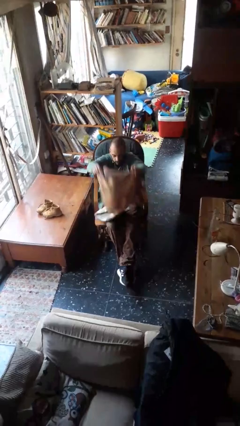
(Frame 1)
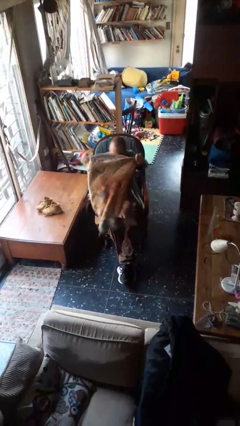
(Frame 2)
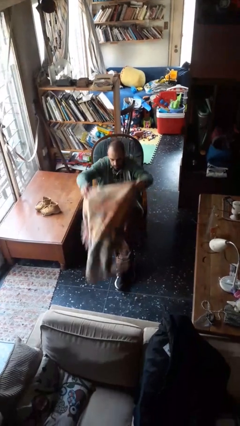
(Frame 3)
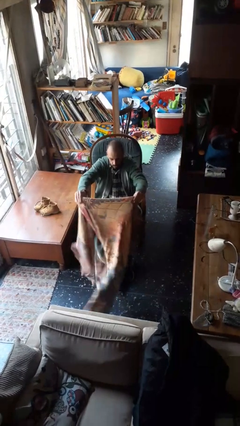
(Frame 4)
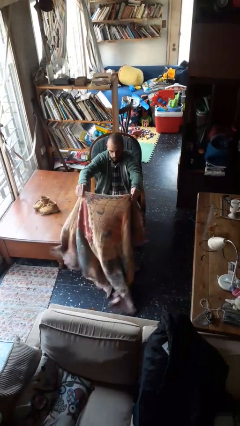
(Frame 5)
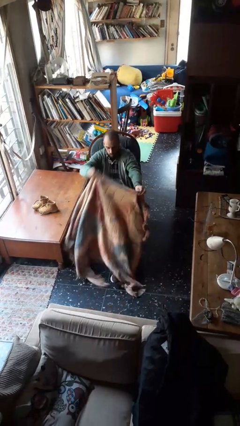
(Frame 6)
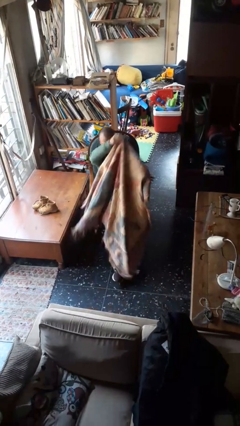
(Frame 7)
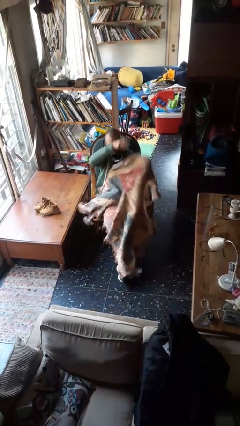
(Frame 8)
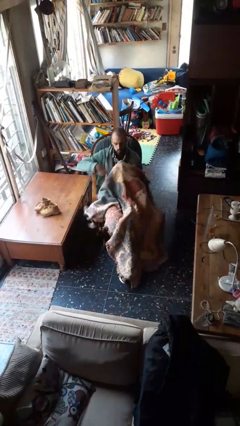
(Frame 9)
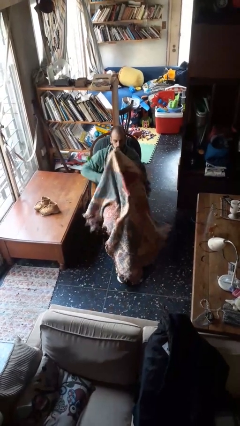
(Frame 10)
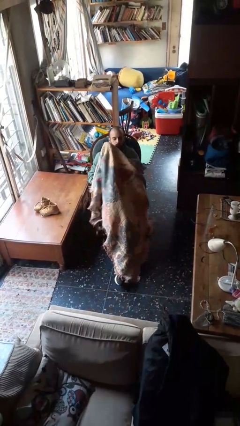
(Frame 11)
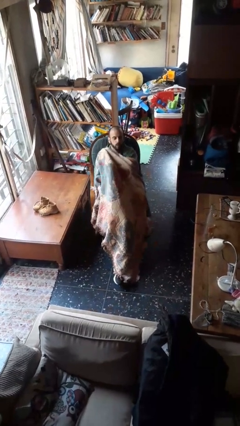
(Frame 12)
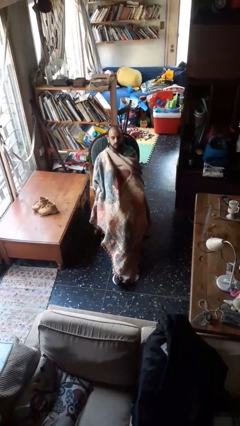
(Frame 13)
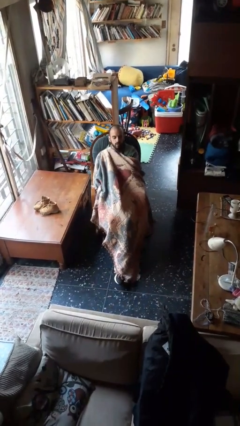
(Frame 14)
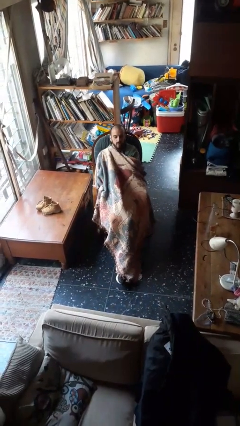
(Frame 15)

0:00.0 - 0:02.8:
person covers with blanket

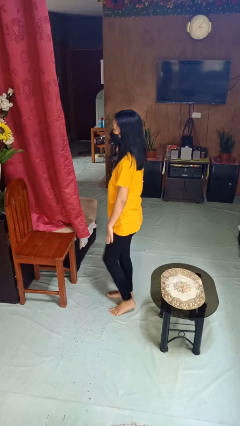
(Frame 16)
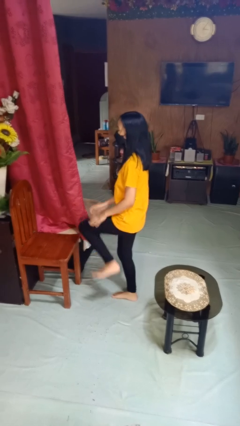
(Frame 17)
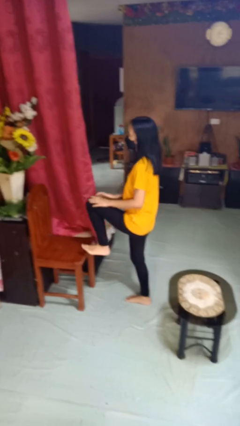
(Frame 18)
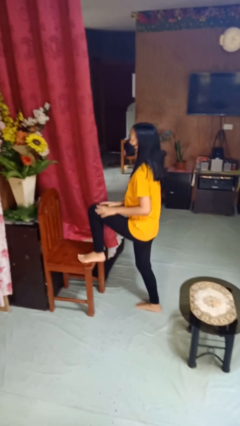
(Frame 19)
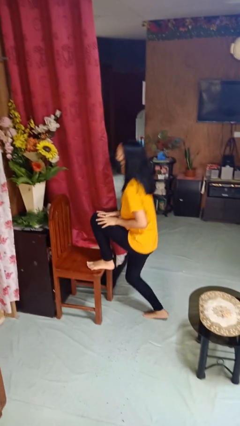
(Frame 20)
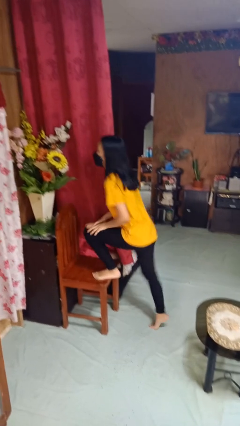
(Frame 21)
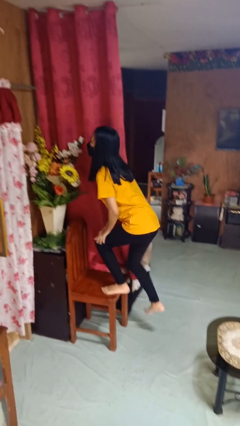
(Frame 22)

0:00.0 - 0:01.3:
person climbs on chair

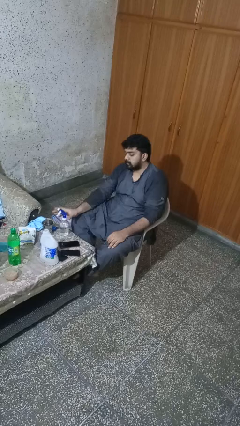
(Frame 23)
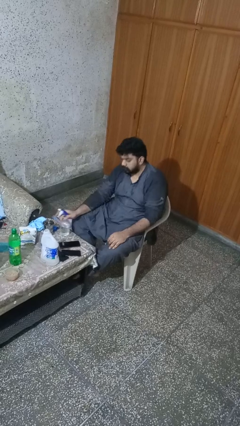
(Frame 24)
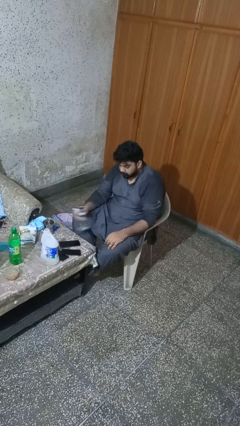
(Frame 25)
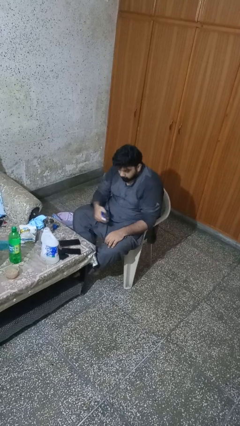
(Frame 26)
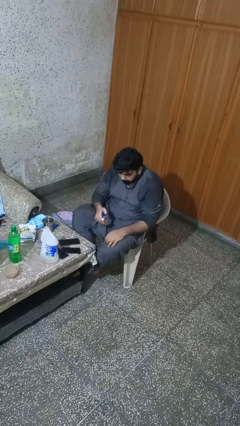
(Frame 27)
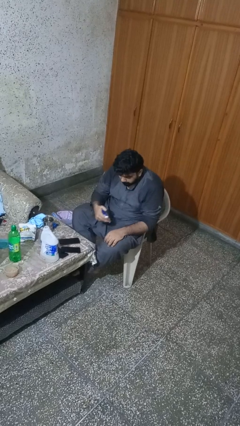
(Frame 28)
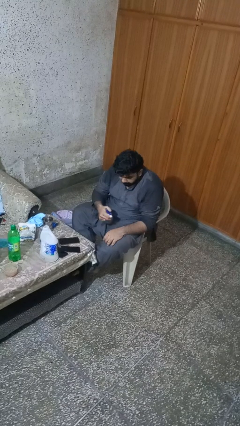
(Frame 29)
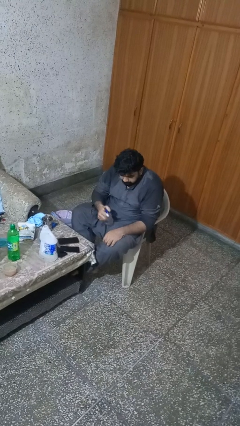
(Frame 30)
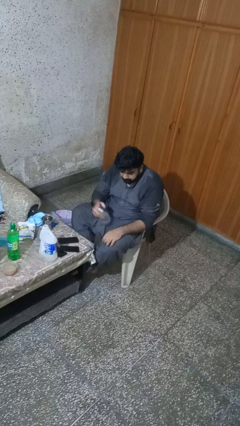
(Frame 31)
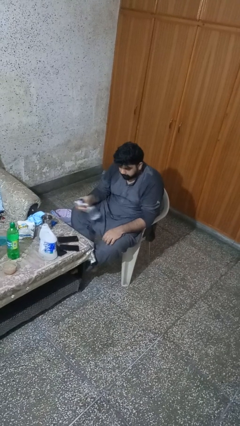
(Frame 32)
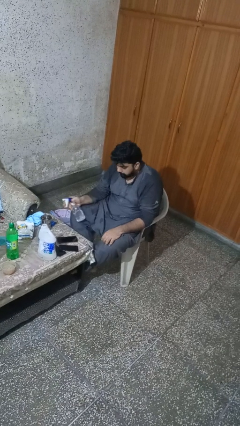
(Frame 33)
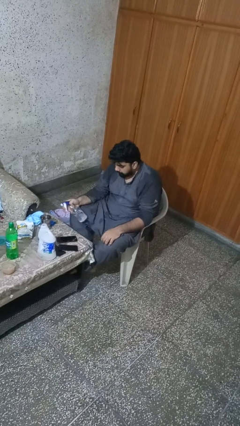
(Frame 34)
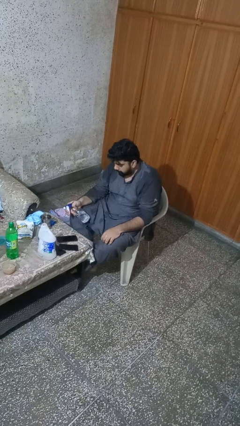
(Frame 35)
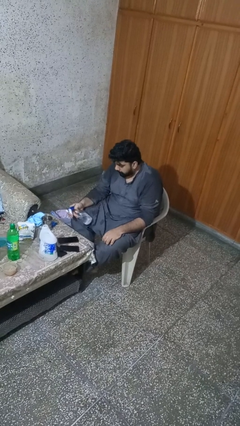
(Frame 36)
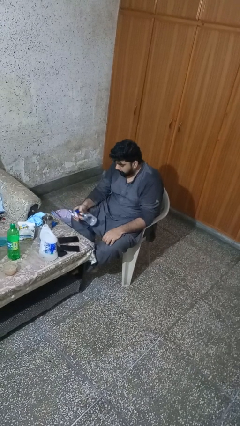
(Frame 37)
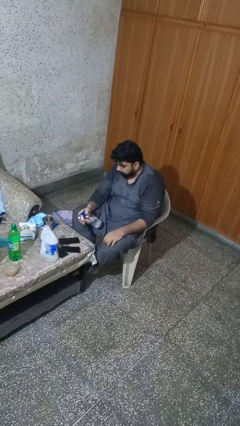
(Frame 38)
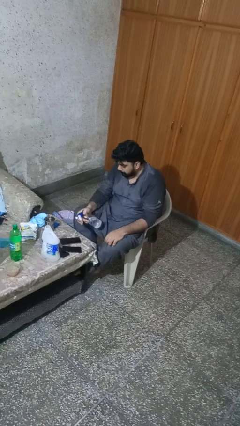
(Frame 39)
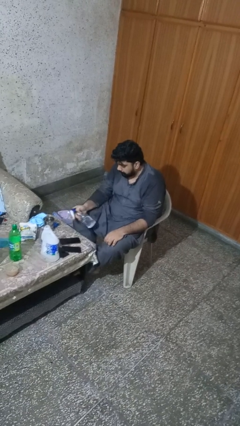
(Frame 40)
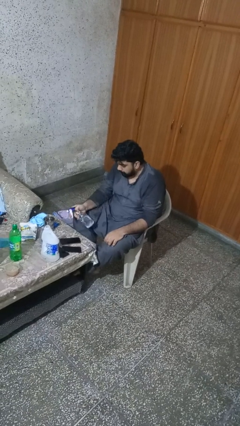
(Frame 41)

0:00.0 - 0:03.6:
person sprays from bottle

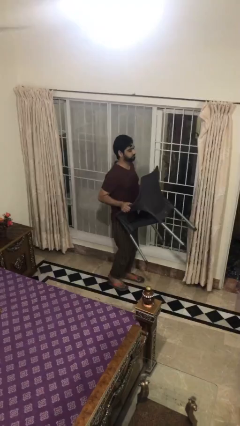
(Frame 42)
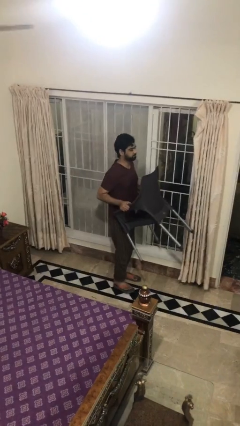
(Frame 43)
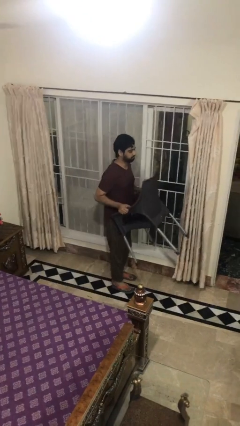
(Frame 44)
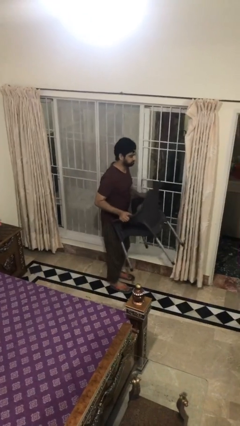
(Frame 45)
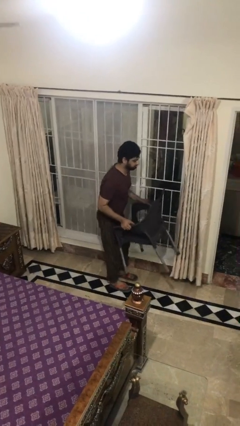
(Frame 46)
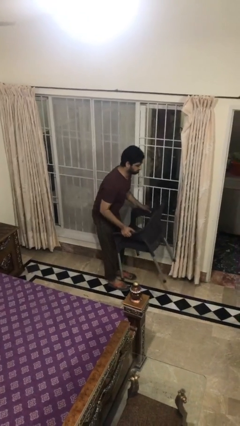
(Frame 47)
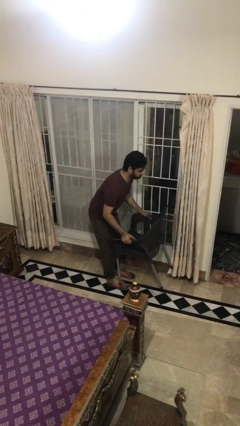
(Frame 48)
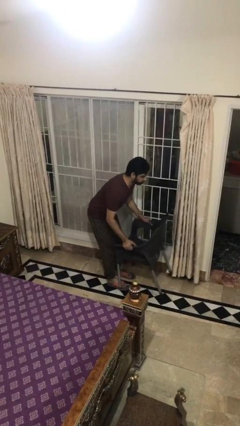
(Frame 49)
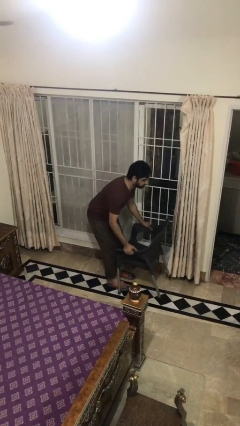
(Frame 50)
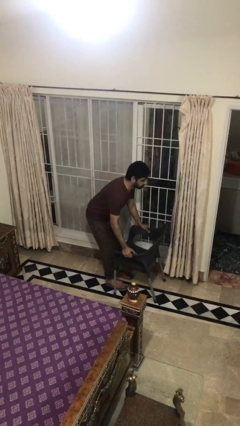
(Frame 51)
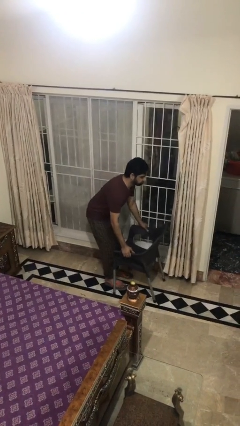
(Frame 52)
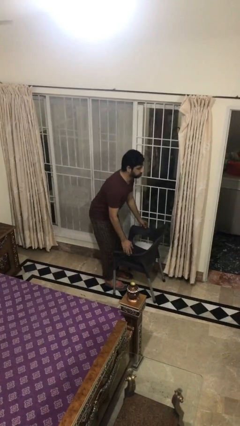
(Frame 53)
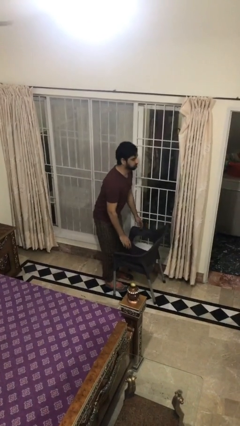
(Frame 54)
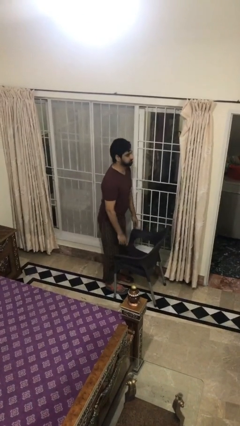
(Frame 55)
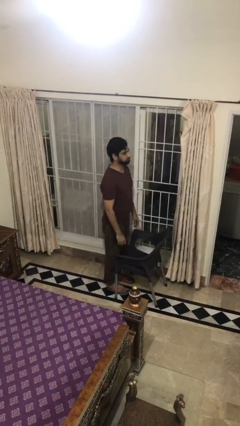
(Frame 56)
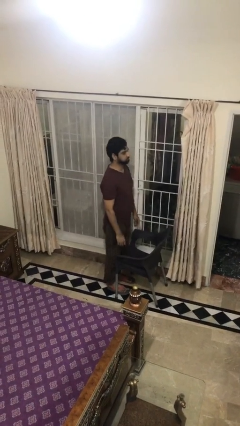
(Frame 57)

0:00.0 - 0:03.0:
person puts down object on floor

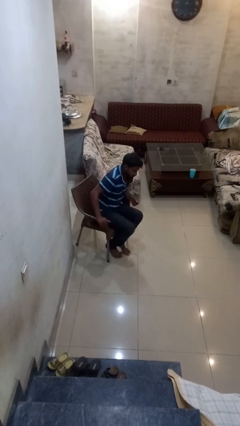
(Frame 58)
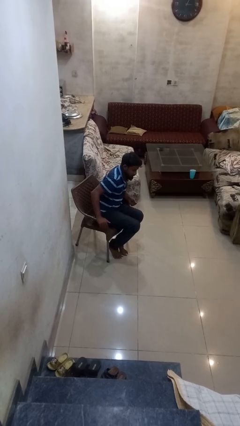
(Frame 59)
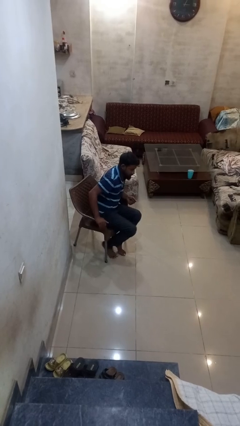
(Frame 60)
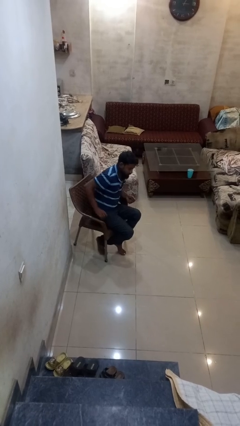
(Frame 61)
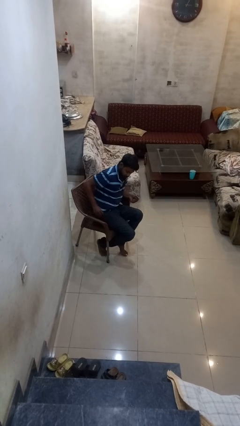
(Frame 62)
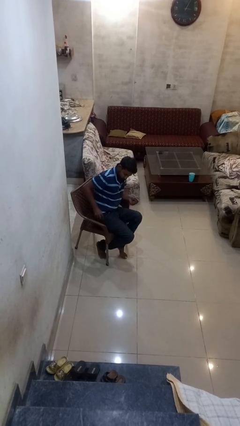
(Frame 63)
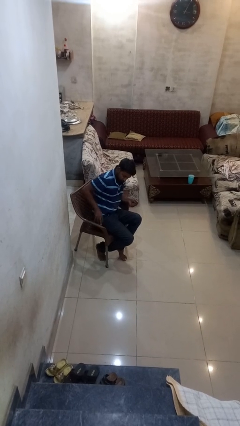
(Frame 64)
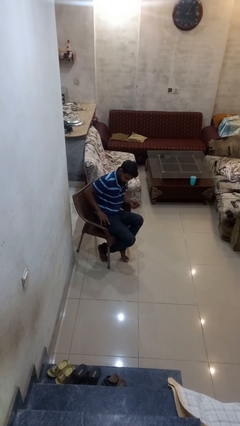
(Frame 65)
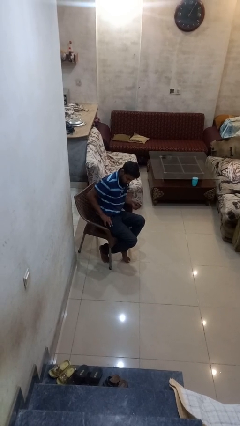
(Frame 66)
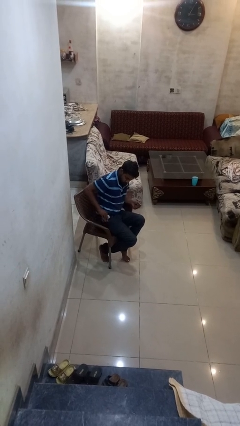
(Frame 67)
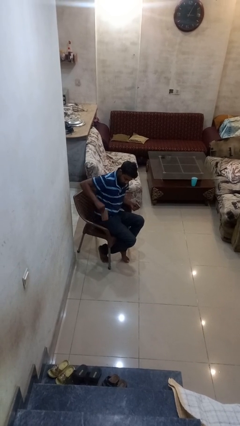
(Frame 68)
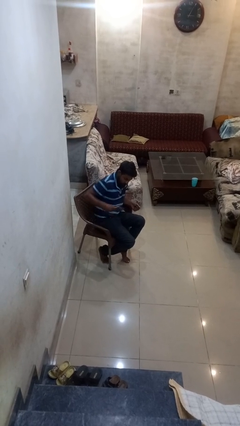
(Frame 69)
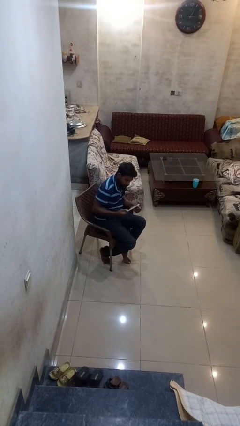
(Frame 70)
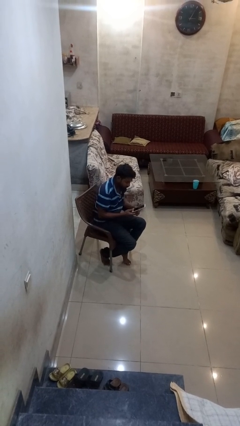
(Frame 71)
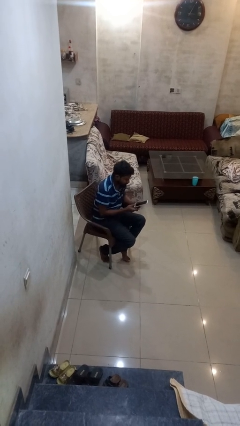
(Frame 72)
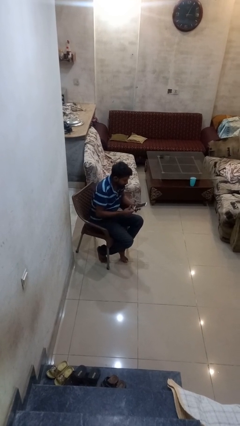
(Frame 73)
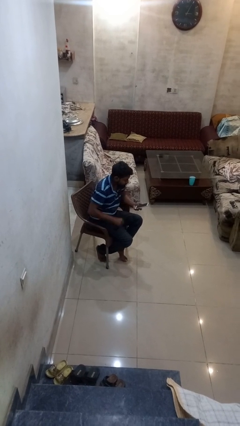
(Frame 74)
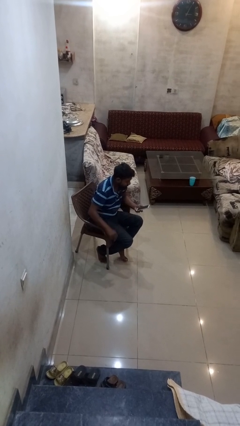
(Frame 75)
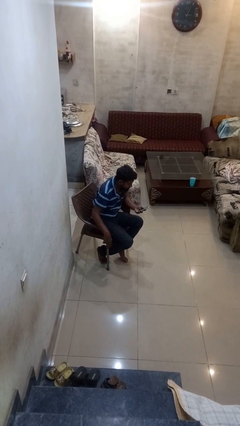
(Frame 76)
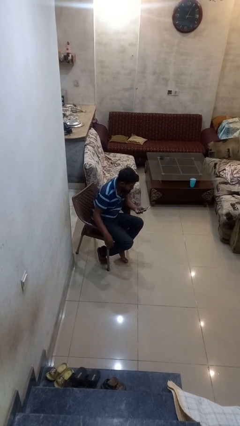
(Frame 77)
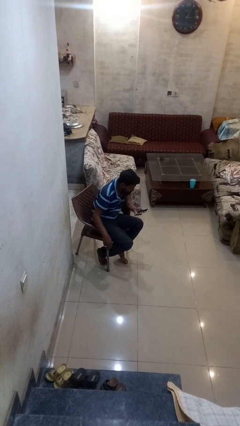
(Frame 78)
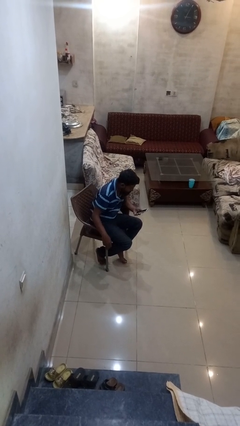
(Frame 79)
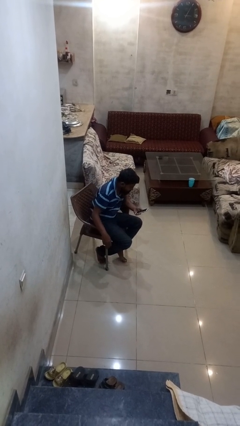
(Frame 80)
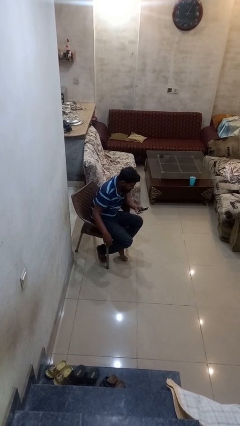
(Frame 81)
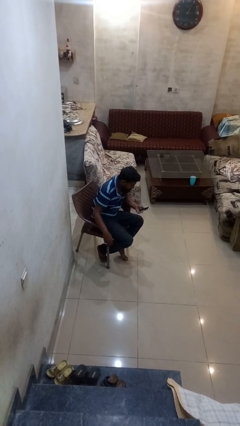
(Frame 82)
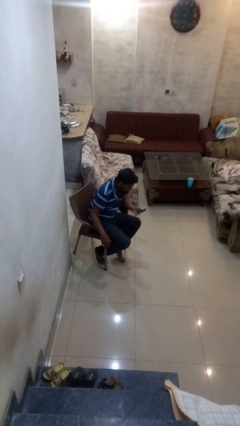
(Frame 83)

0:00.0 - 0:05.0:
person takes phone from pocket

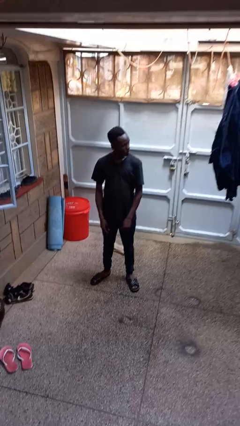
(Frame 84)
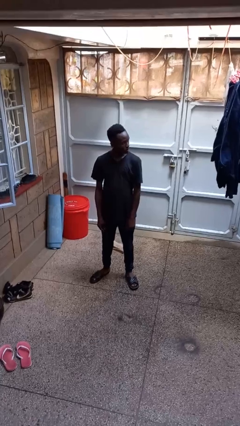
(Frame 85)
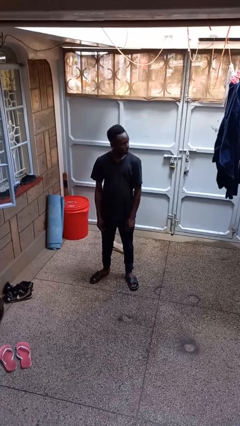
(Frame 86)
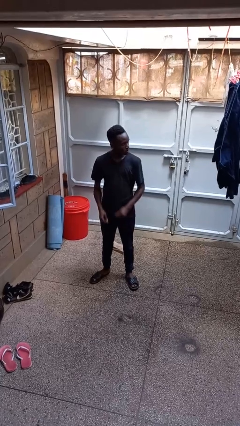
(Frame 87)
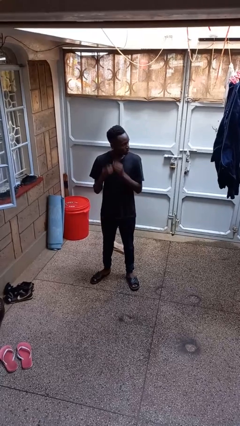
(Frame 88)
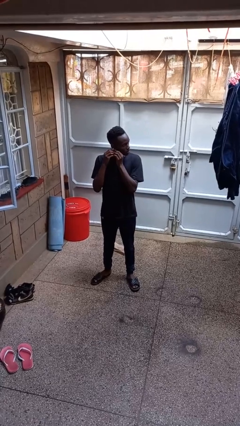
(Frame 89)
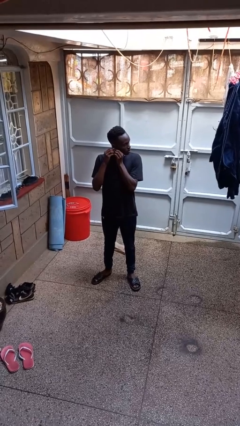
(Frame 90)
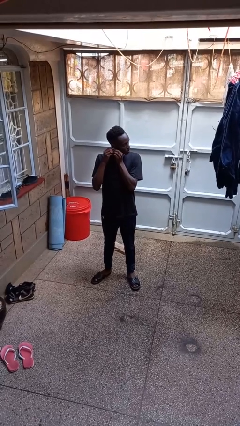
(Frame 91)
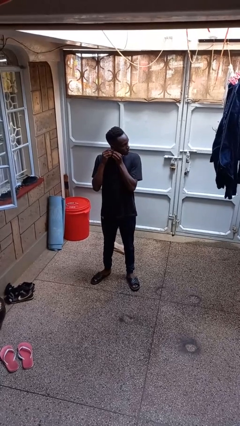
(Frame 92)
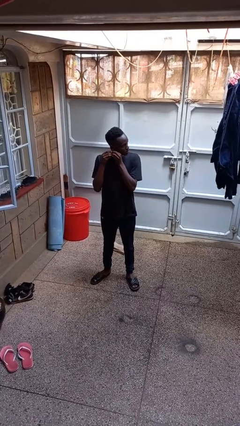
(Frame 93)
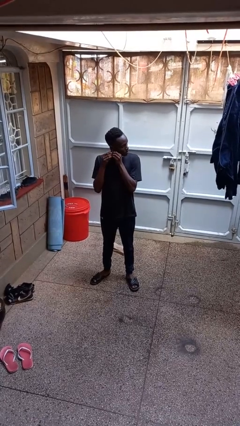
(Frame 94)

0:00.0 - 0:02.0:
person takes off earrings

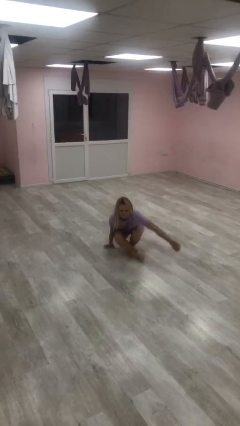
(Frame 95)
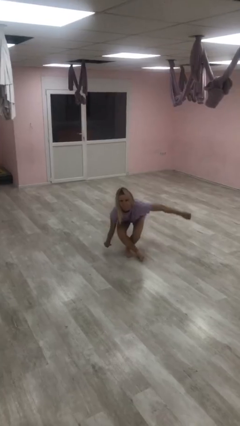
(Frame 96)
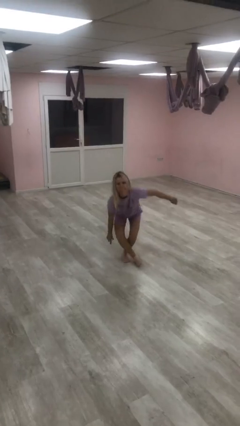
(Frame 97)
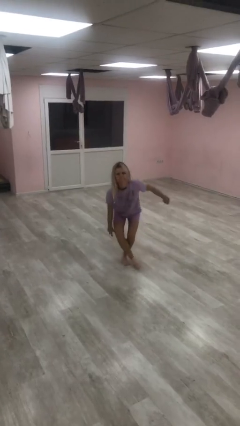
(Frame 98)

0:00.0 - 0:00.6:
person stands up from floor
